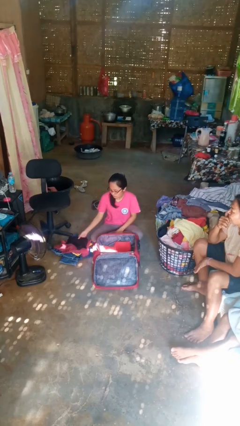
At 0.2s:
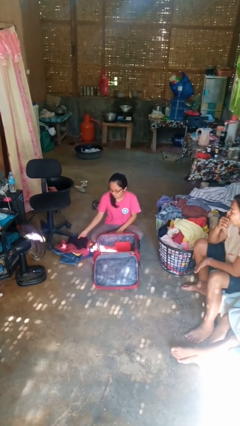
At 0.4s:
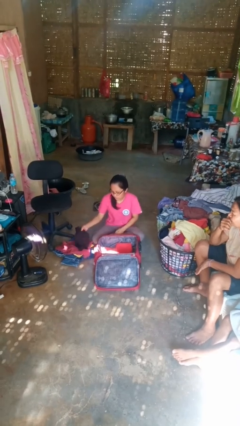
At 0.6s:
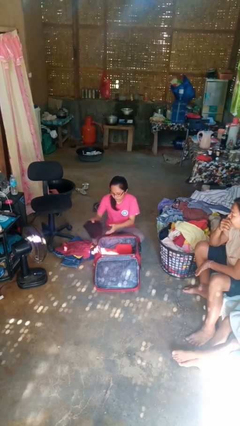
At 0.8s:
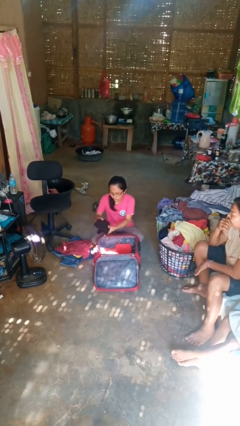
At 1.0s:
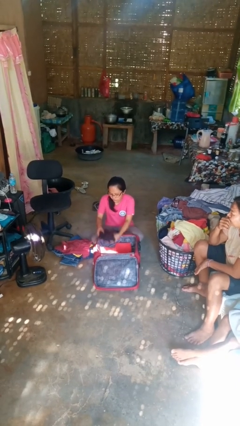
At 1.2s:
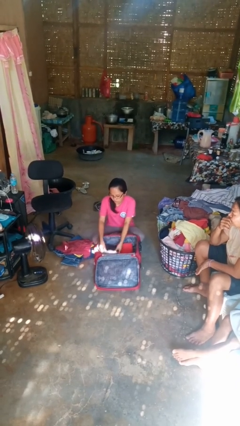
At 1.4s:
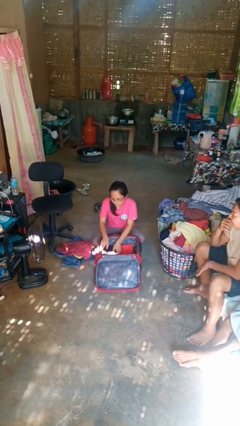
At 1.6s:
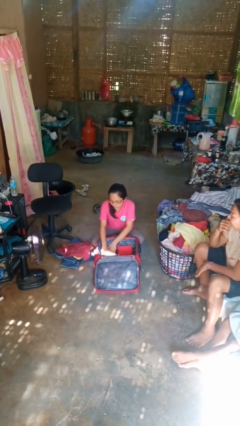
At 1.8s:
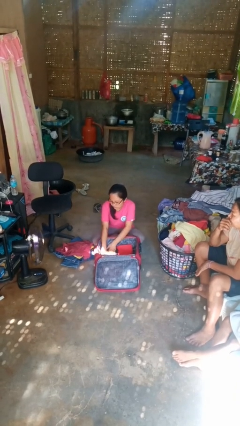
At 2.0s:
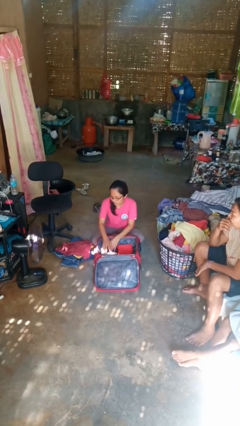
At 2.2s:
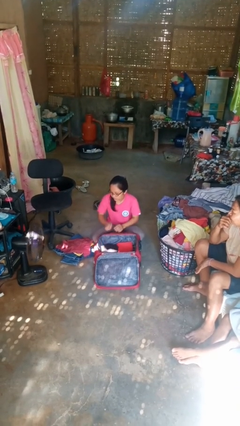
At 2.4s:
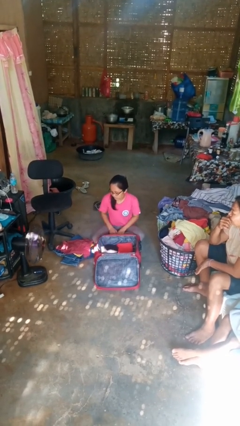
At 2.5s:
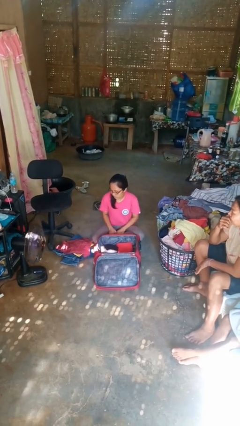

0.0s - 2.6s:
person loads clothes into suitcase

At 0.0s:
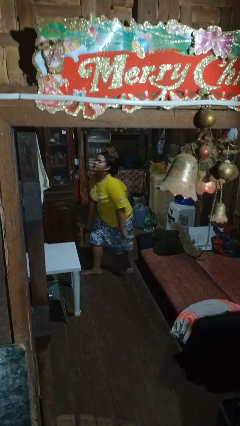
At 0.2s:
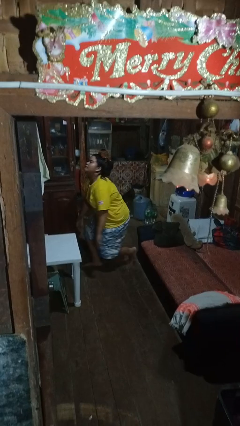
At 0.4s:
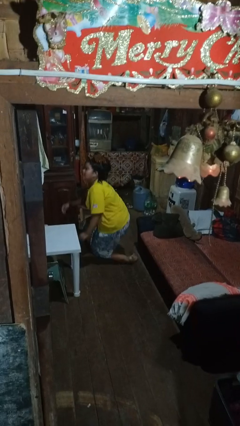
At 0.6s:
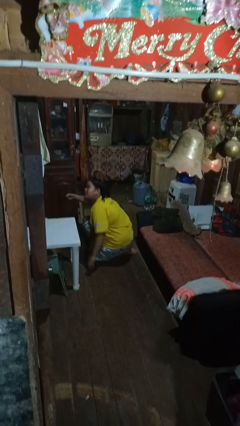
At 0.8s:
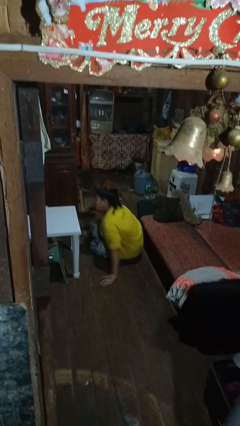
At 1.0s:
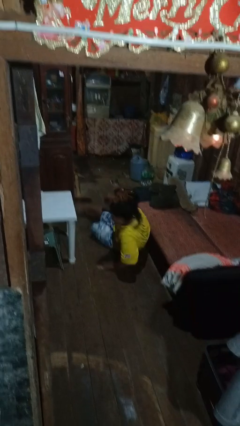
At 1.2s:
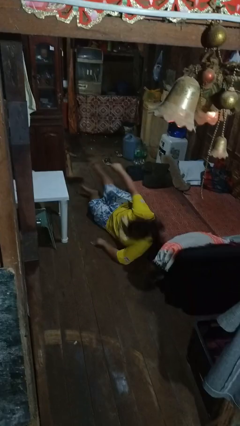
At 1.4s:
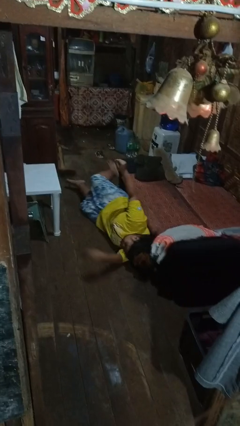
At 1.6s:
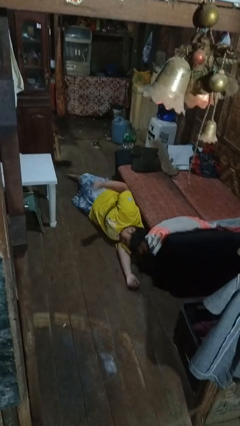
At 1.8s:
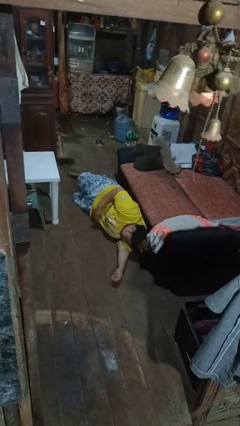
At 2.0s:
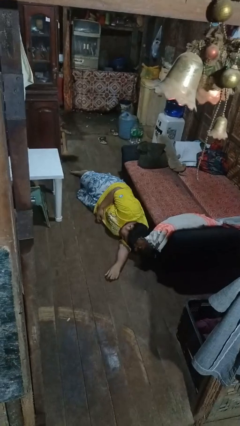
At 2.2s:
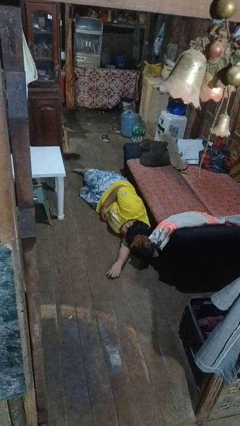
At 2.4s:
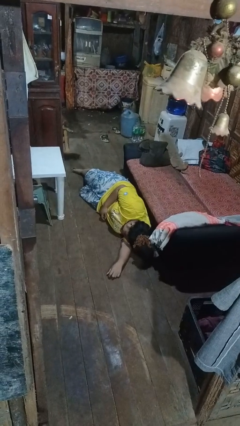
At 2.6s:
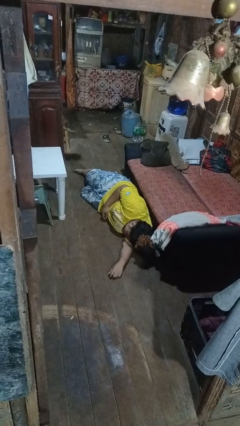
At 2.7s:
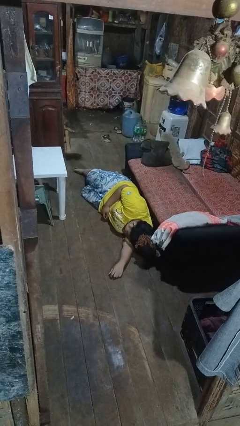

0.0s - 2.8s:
person falls while standing

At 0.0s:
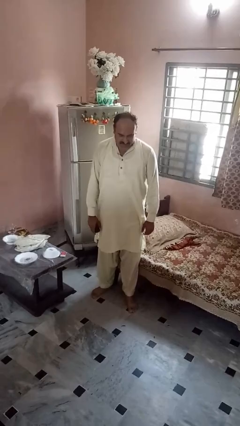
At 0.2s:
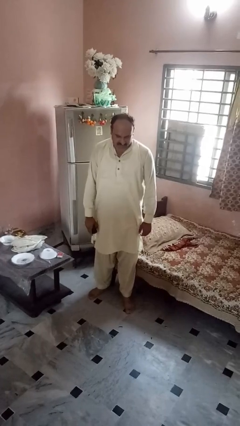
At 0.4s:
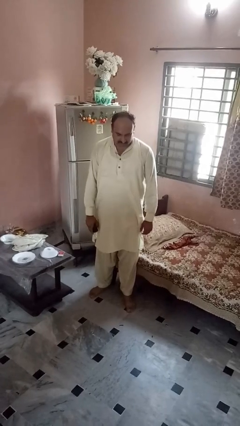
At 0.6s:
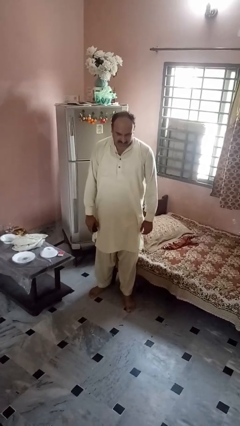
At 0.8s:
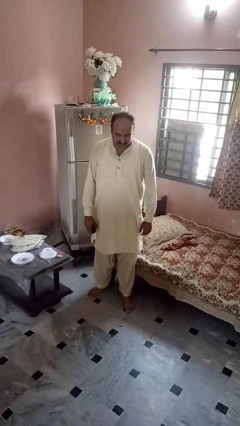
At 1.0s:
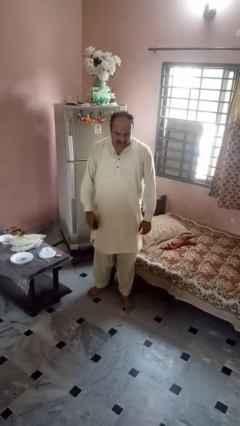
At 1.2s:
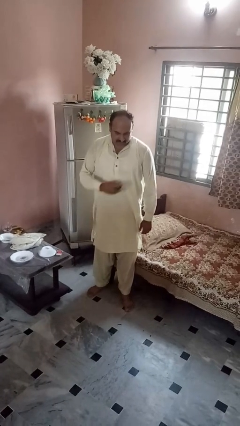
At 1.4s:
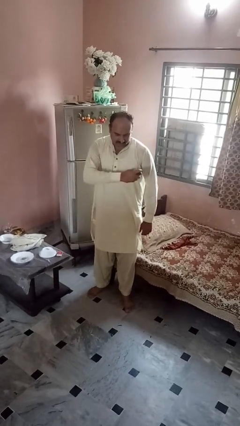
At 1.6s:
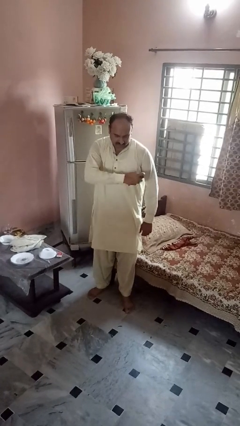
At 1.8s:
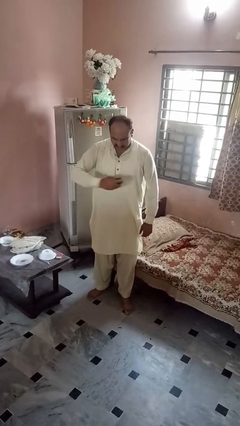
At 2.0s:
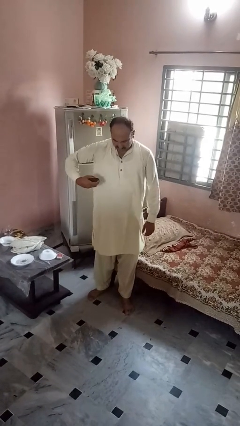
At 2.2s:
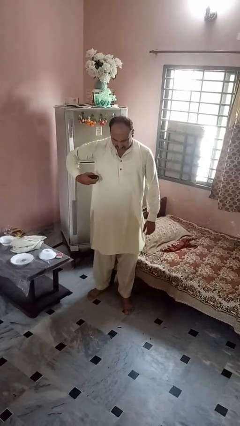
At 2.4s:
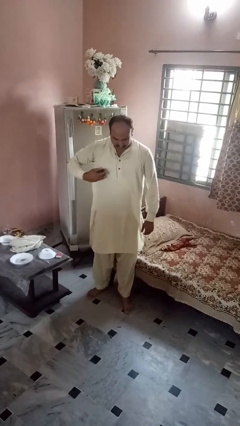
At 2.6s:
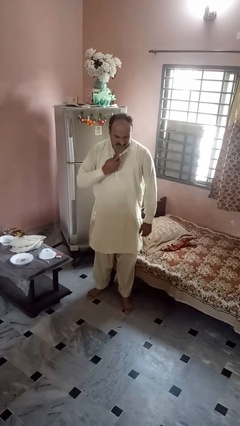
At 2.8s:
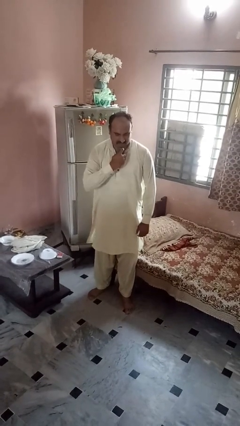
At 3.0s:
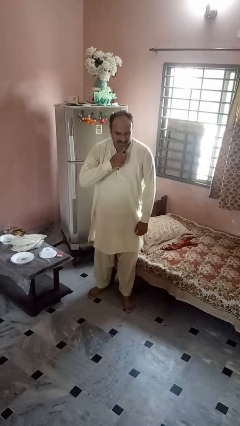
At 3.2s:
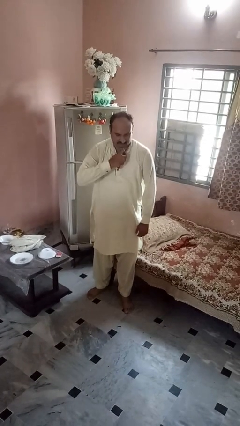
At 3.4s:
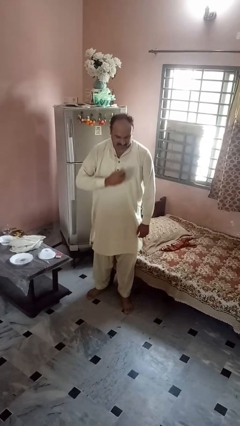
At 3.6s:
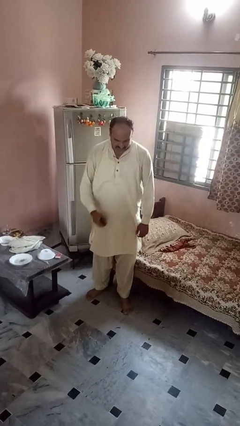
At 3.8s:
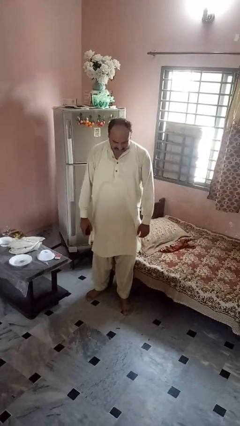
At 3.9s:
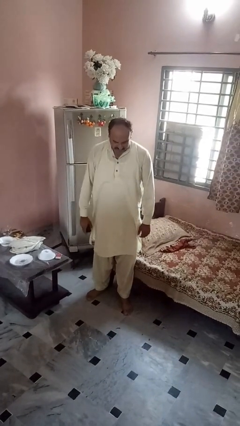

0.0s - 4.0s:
person applies deodorant

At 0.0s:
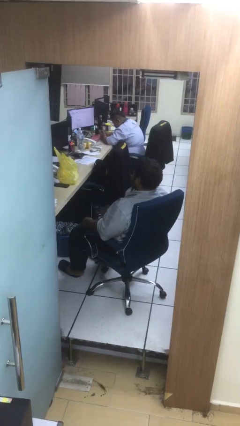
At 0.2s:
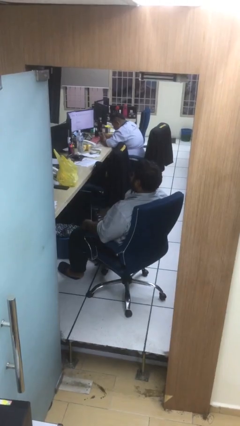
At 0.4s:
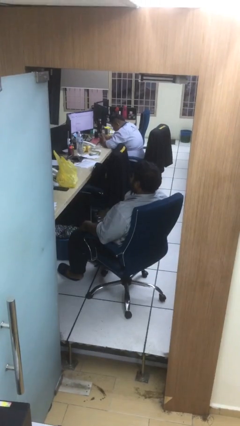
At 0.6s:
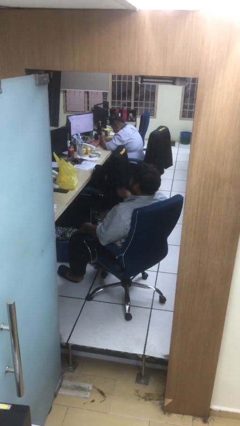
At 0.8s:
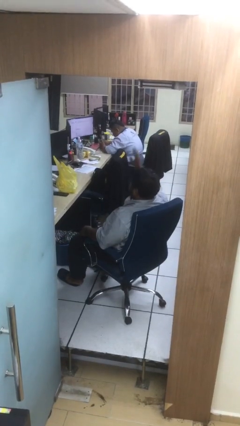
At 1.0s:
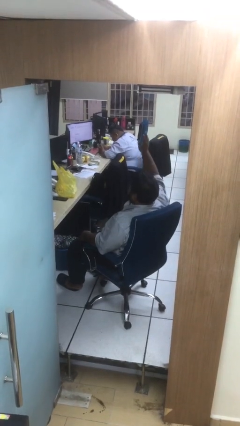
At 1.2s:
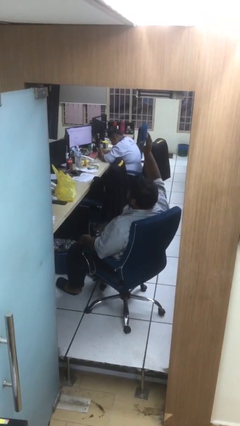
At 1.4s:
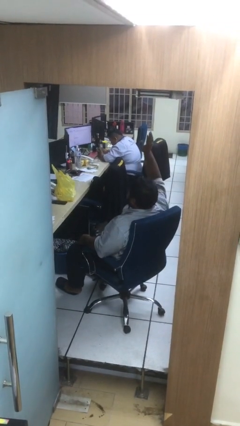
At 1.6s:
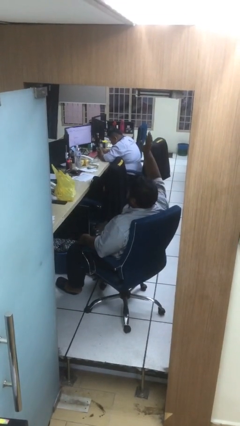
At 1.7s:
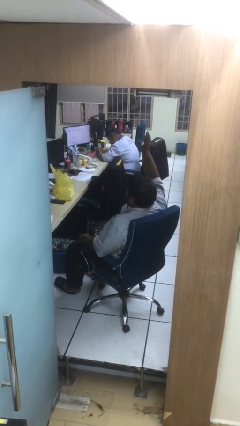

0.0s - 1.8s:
person gestures raise hand

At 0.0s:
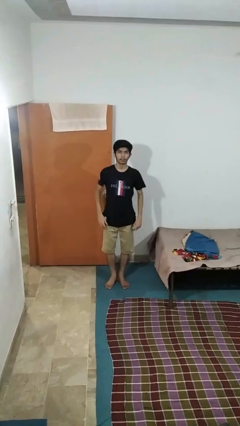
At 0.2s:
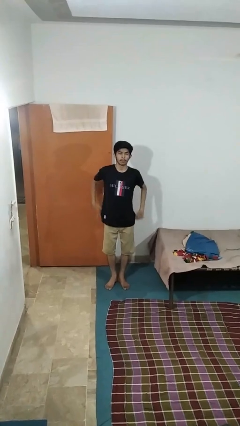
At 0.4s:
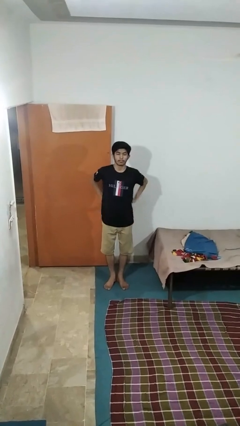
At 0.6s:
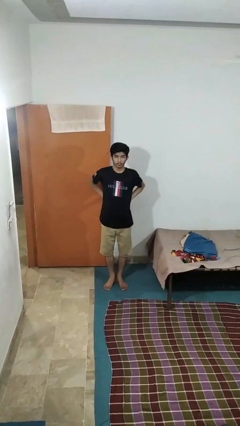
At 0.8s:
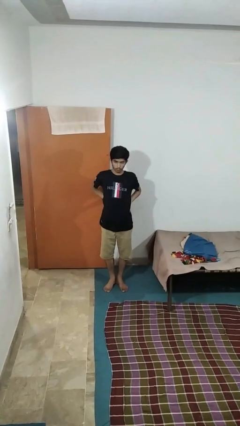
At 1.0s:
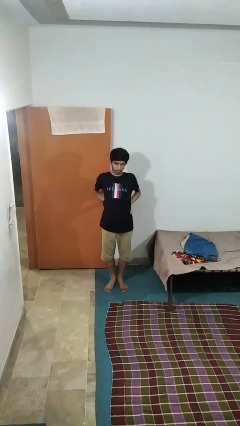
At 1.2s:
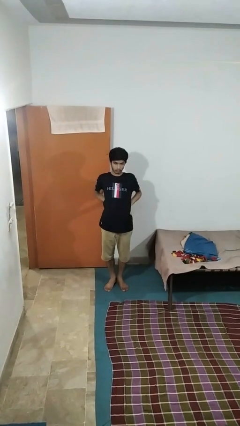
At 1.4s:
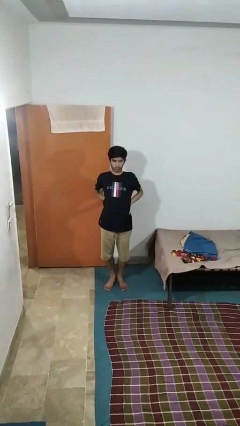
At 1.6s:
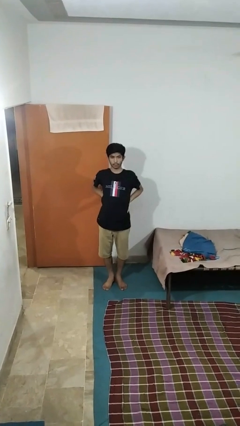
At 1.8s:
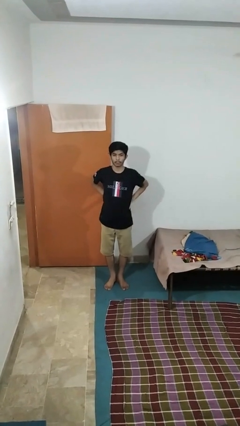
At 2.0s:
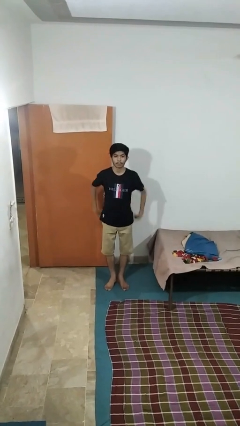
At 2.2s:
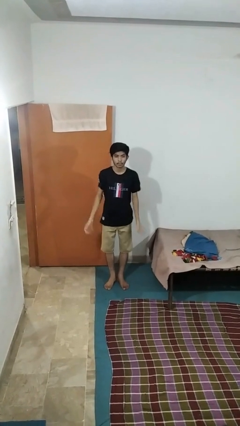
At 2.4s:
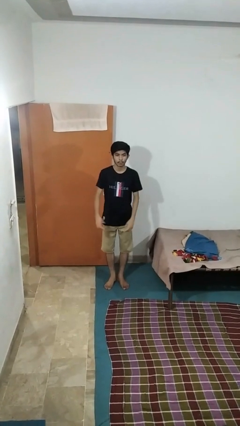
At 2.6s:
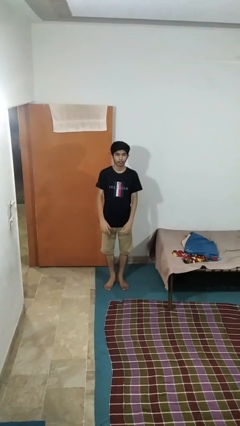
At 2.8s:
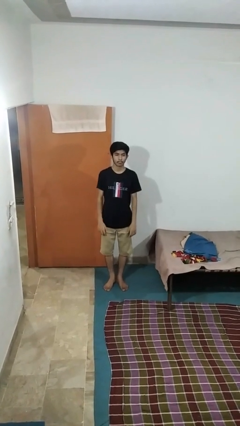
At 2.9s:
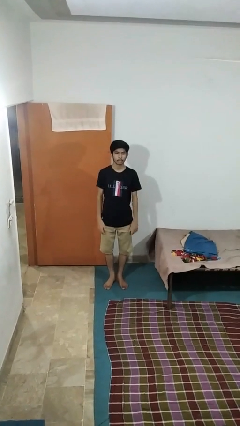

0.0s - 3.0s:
person stretches back

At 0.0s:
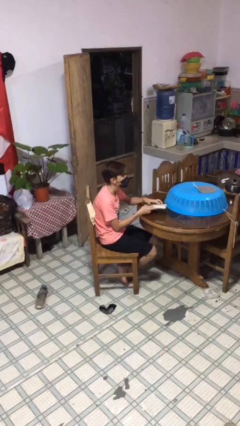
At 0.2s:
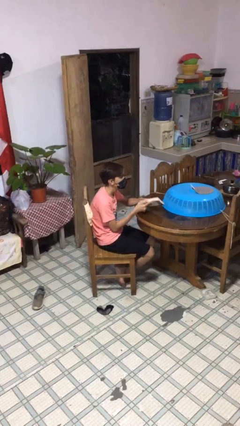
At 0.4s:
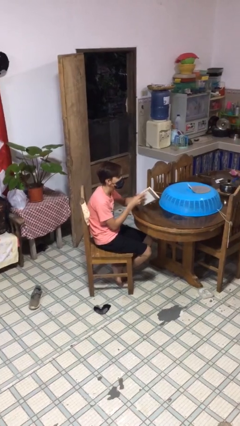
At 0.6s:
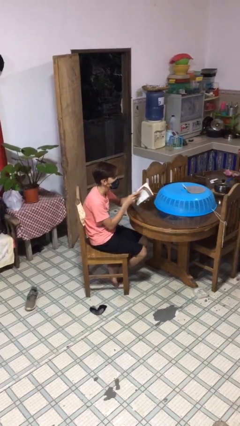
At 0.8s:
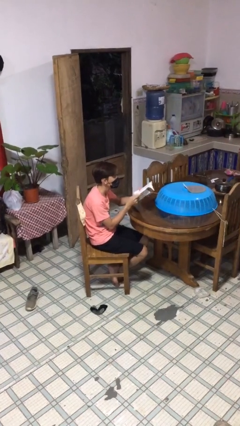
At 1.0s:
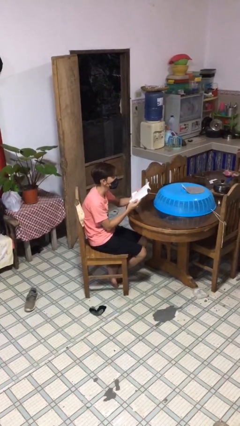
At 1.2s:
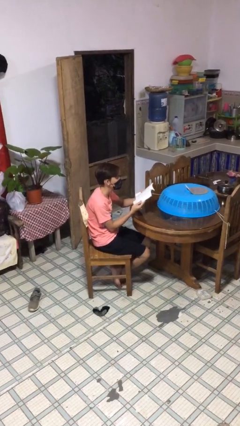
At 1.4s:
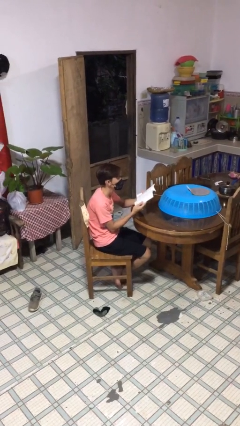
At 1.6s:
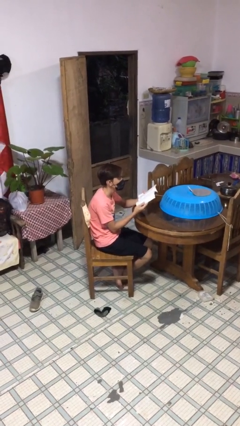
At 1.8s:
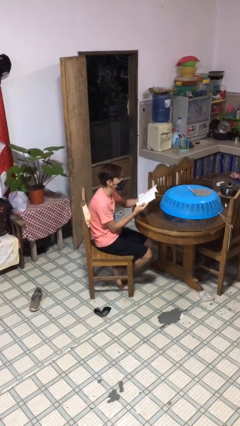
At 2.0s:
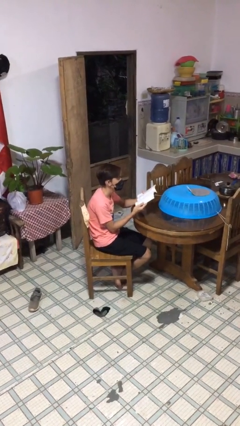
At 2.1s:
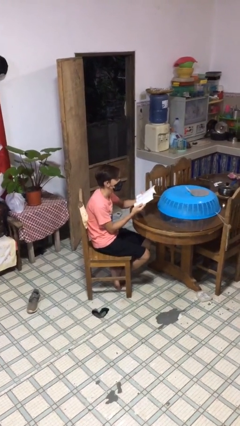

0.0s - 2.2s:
person reads document

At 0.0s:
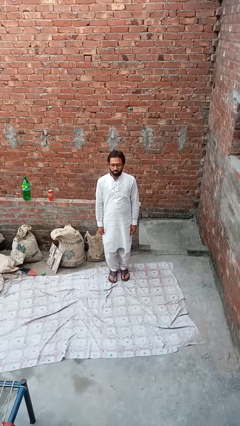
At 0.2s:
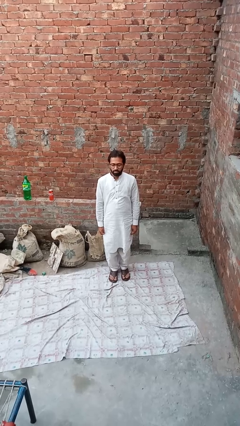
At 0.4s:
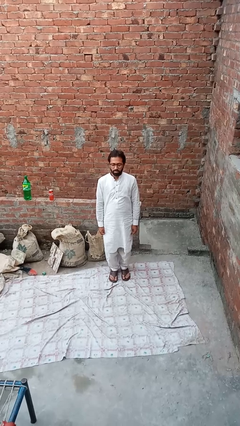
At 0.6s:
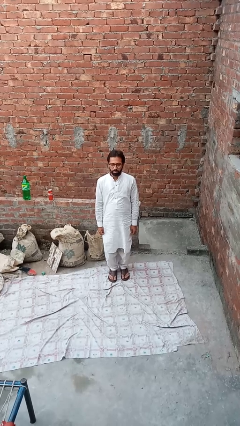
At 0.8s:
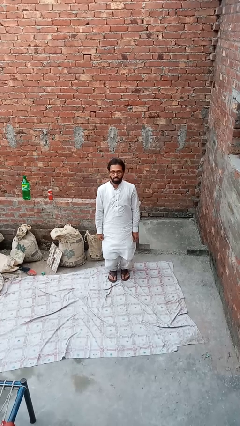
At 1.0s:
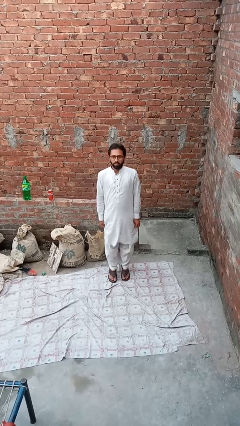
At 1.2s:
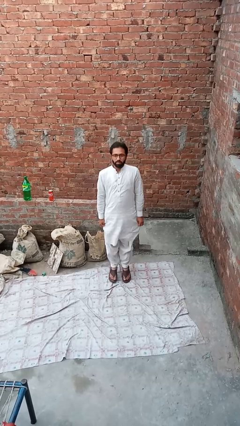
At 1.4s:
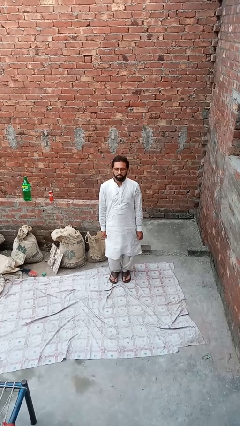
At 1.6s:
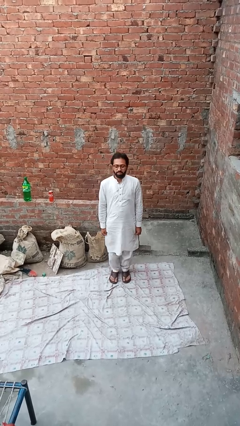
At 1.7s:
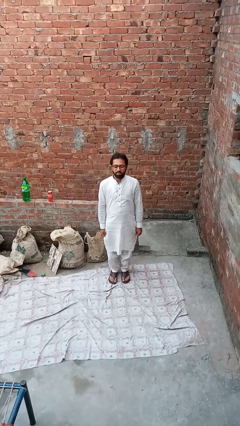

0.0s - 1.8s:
person exercises with jumping jacks
